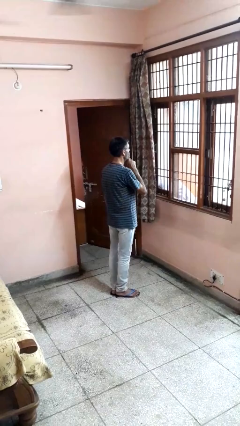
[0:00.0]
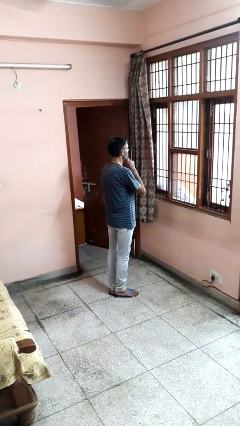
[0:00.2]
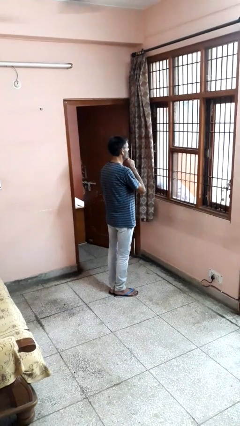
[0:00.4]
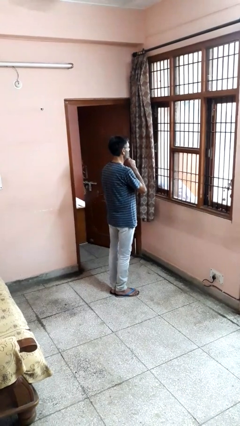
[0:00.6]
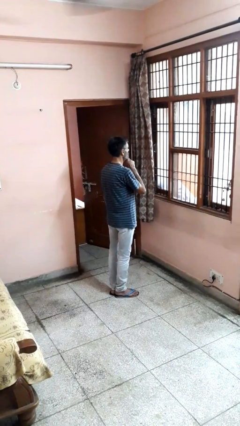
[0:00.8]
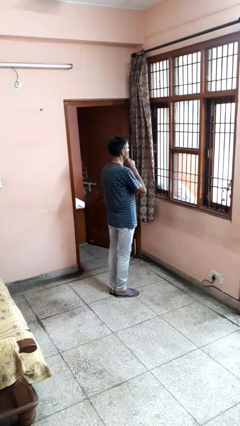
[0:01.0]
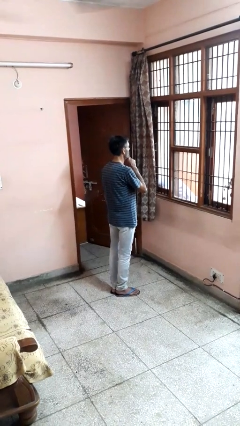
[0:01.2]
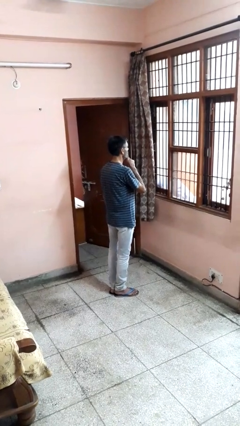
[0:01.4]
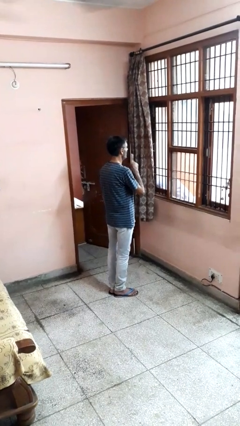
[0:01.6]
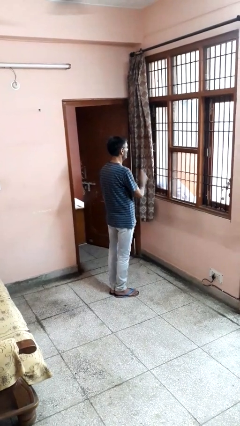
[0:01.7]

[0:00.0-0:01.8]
person gestures be quiet

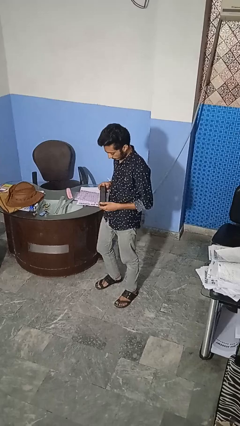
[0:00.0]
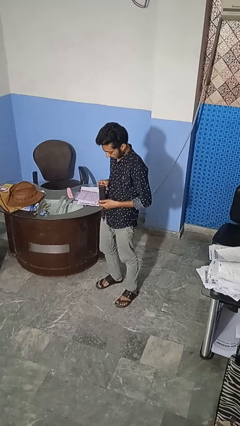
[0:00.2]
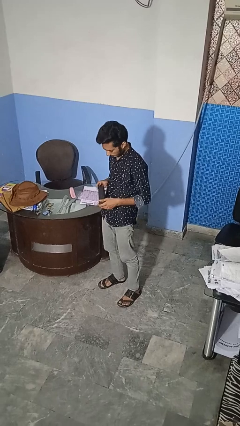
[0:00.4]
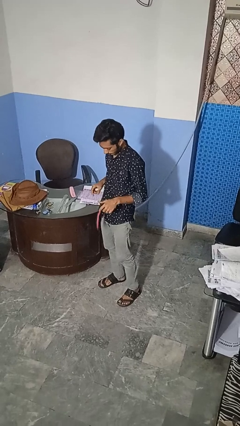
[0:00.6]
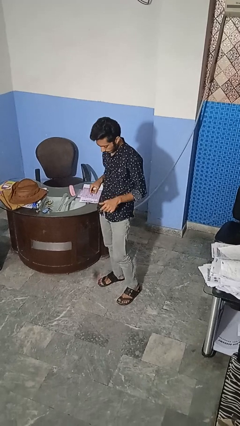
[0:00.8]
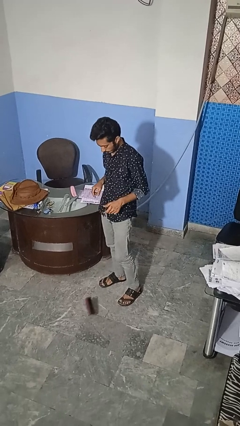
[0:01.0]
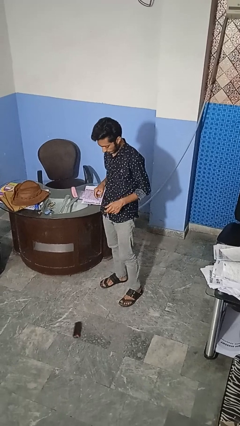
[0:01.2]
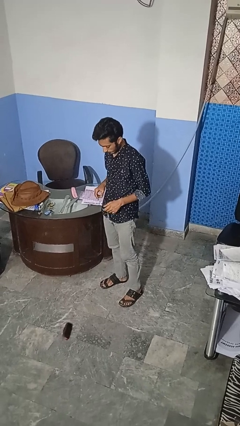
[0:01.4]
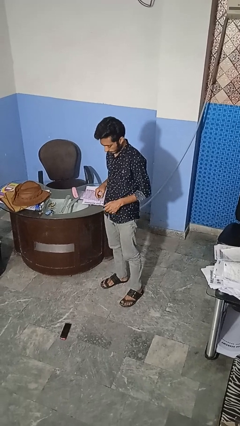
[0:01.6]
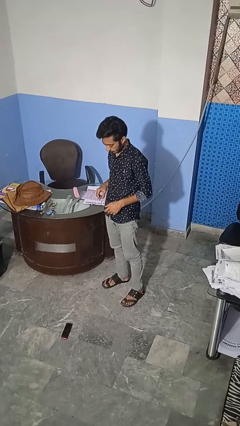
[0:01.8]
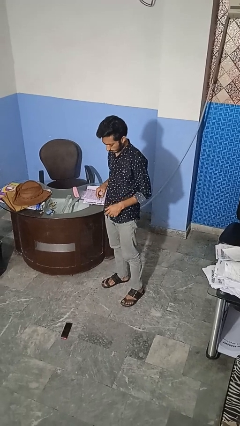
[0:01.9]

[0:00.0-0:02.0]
person drops object

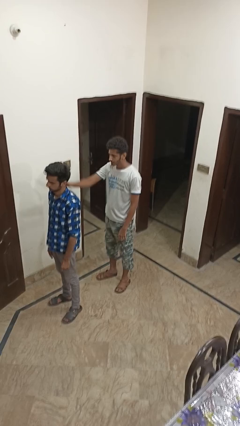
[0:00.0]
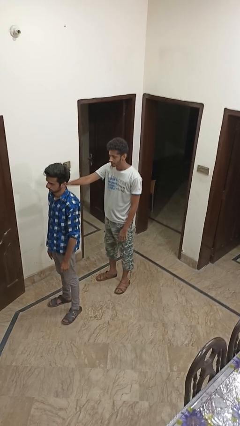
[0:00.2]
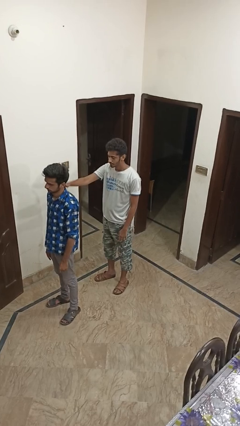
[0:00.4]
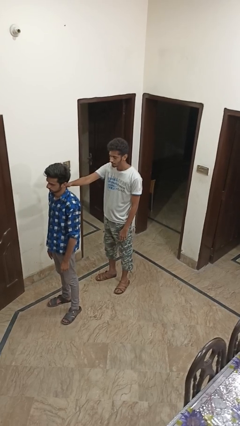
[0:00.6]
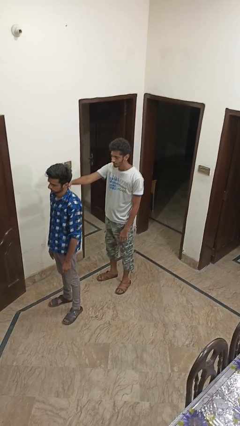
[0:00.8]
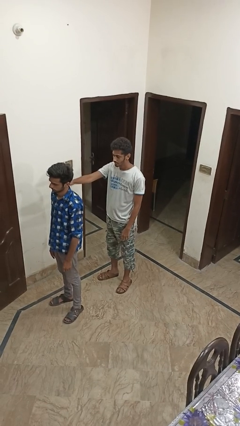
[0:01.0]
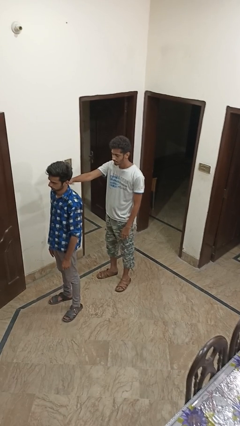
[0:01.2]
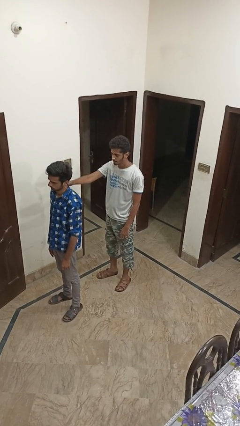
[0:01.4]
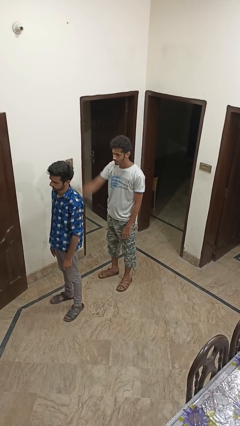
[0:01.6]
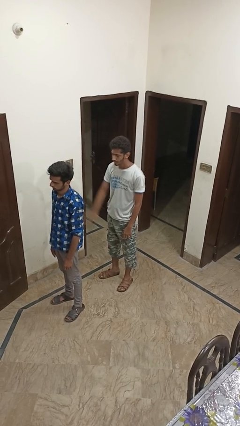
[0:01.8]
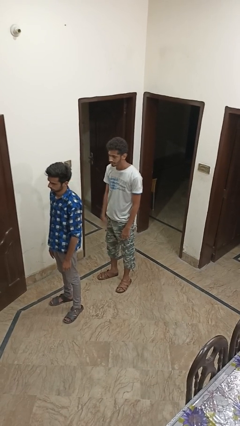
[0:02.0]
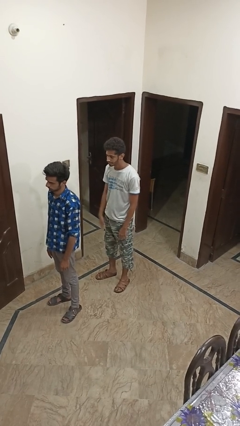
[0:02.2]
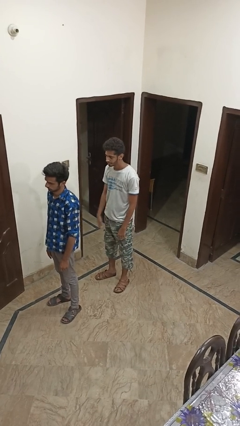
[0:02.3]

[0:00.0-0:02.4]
person touches back of person

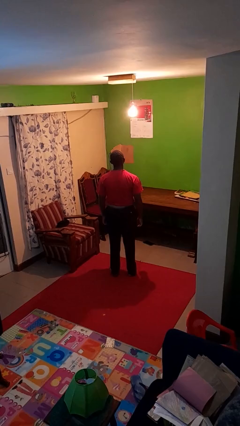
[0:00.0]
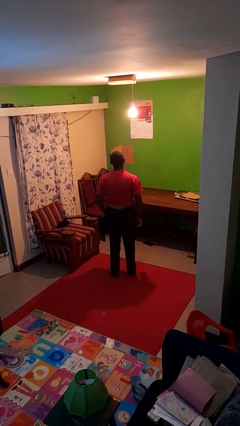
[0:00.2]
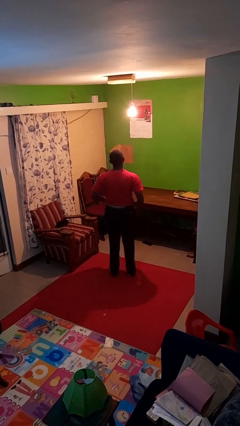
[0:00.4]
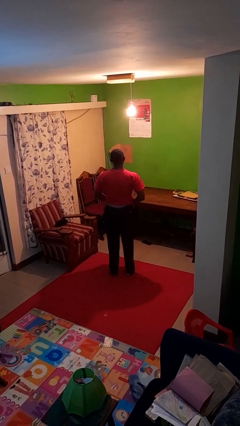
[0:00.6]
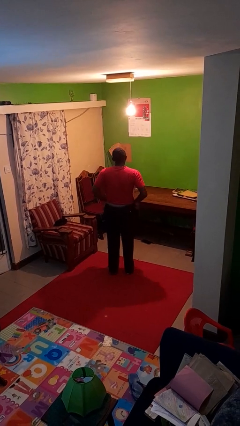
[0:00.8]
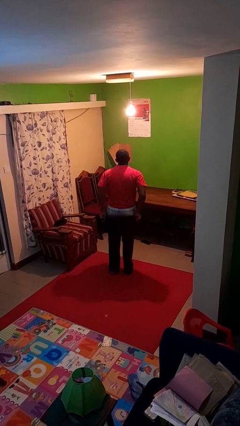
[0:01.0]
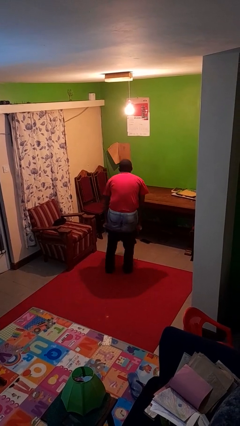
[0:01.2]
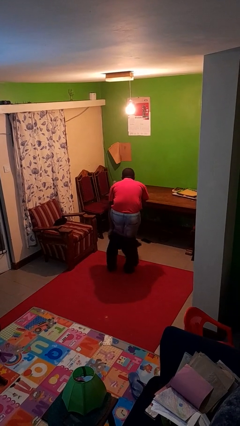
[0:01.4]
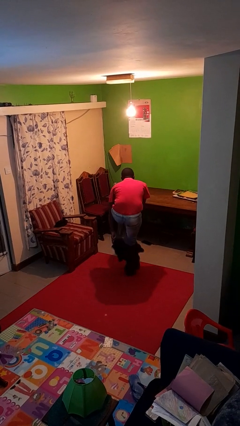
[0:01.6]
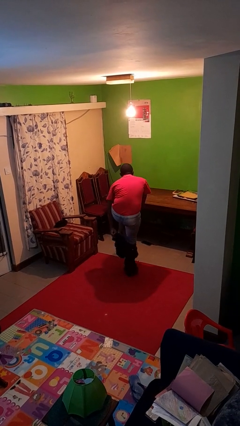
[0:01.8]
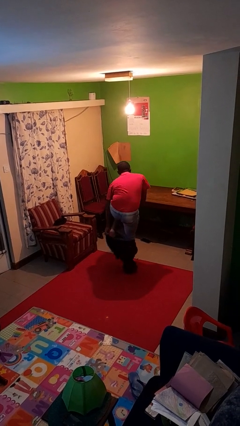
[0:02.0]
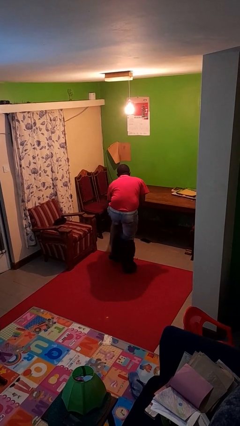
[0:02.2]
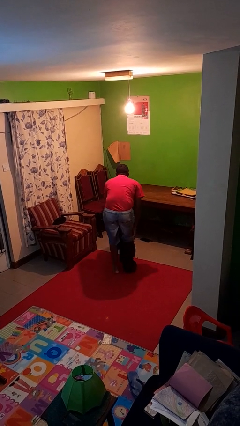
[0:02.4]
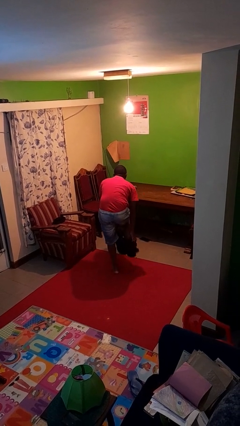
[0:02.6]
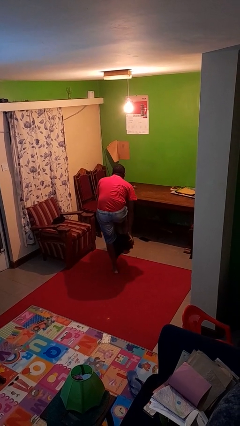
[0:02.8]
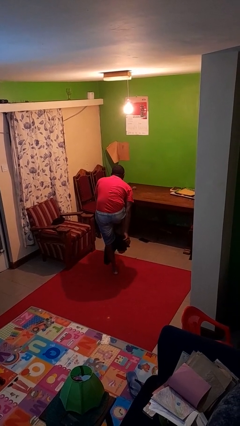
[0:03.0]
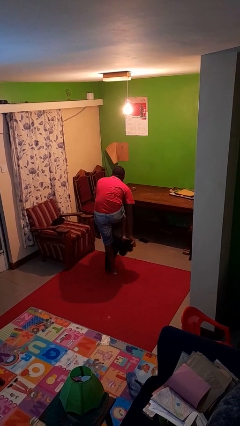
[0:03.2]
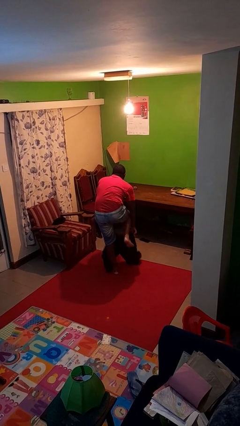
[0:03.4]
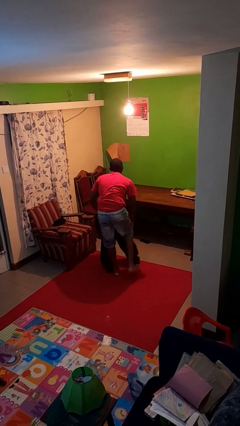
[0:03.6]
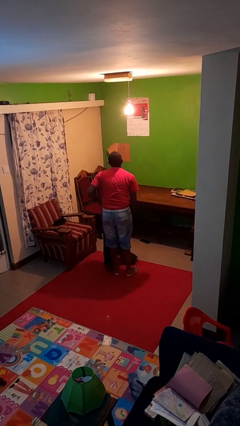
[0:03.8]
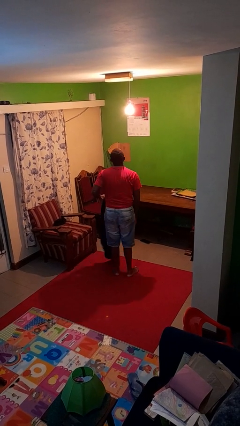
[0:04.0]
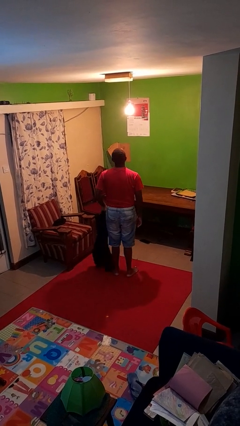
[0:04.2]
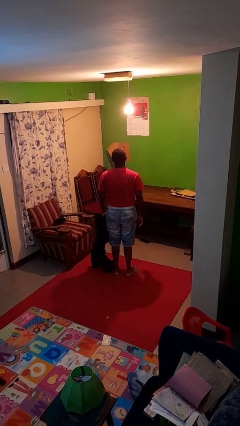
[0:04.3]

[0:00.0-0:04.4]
person takes off pants

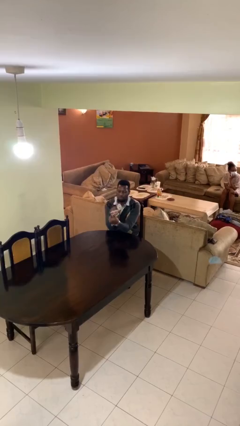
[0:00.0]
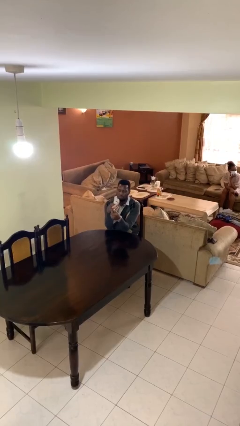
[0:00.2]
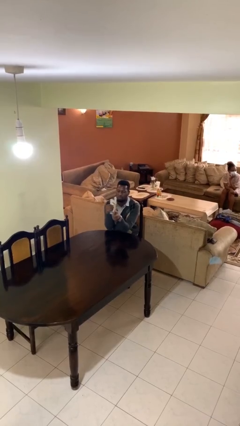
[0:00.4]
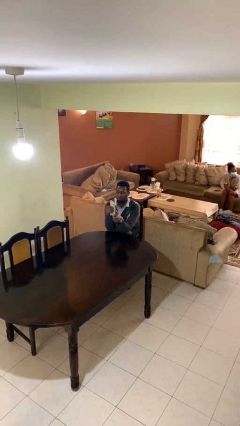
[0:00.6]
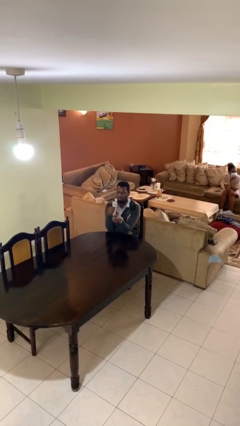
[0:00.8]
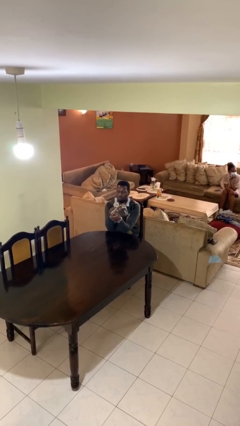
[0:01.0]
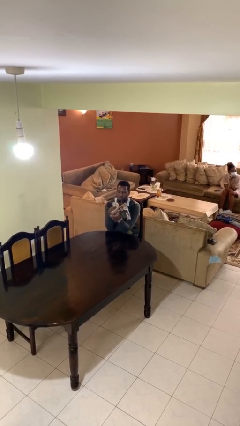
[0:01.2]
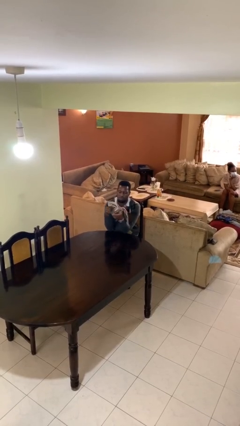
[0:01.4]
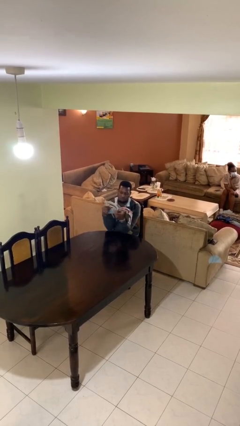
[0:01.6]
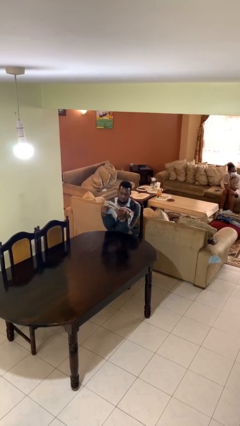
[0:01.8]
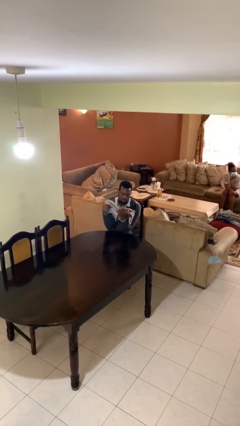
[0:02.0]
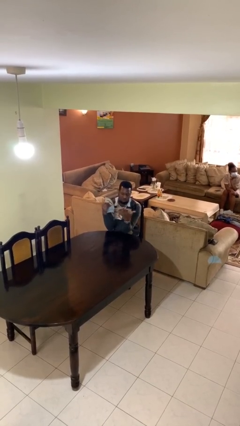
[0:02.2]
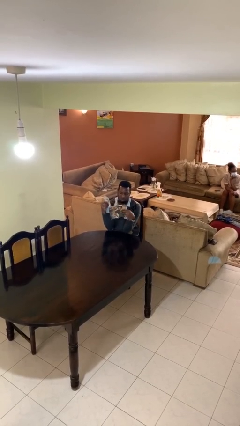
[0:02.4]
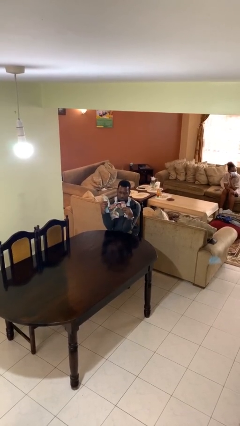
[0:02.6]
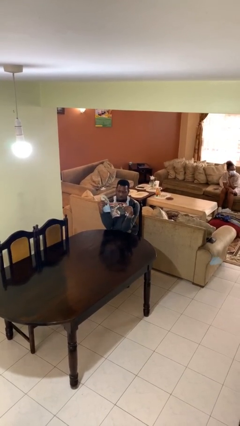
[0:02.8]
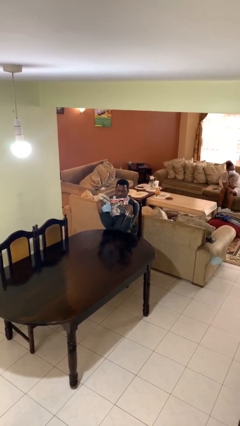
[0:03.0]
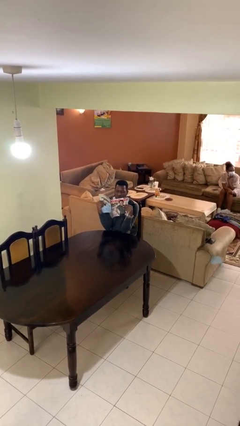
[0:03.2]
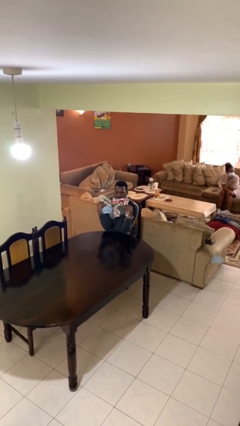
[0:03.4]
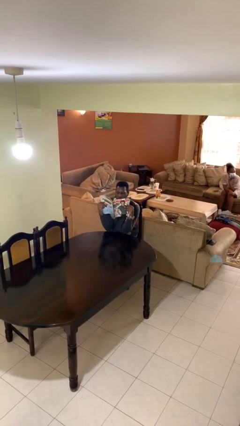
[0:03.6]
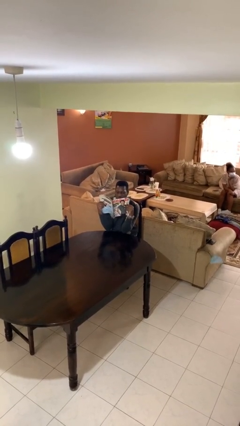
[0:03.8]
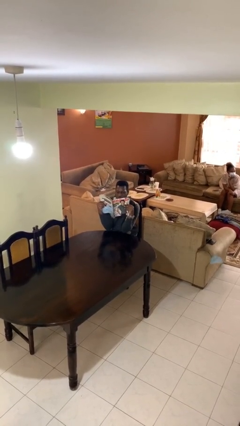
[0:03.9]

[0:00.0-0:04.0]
person reads document

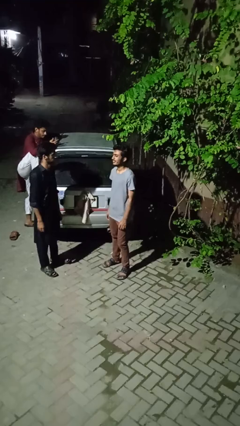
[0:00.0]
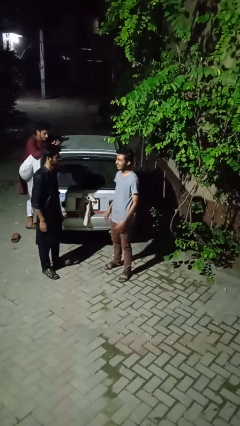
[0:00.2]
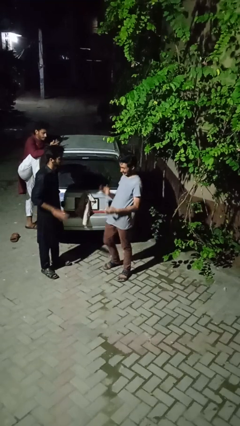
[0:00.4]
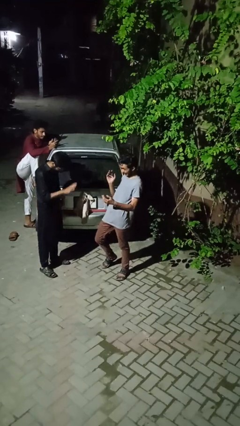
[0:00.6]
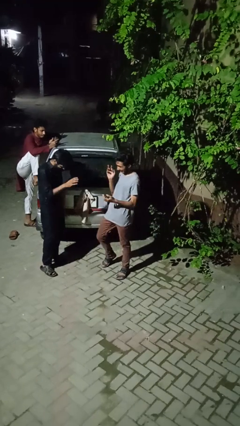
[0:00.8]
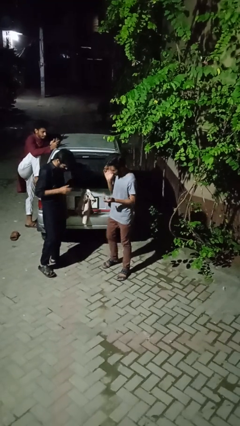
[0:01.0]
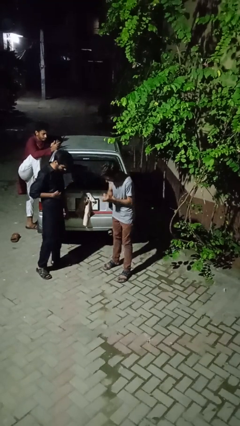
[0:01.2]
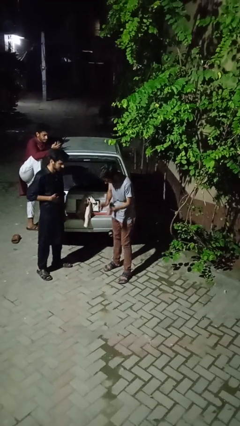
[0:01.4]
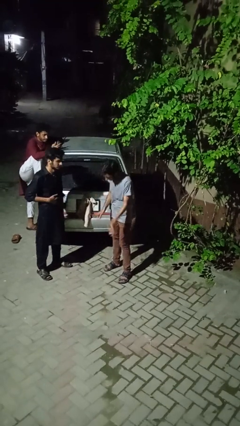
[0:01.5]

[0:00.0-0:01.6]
person laughs with person

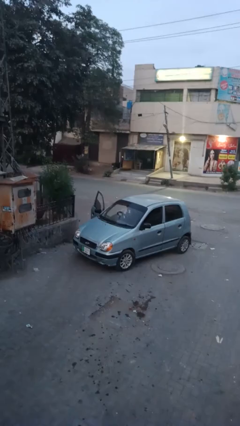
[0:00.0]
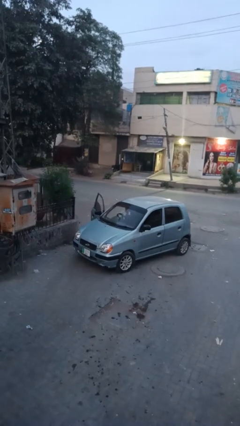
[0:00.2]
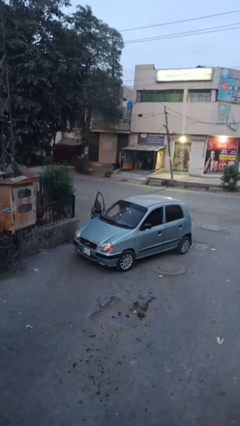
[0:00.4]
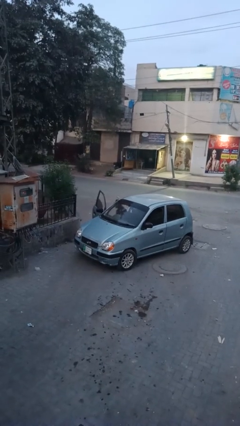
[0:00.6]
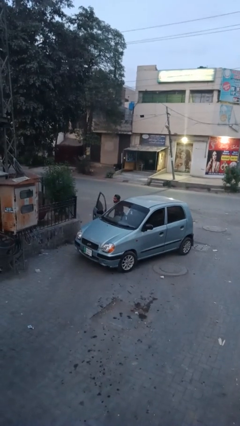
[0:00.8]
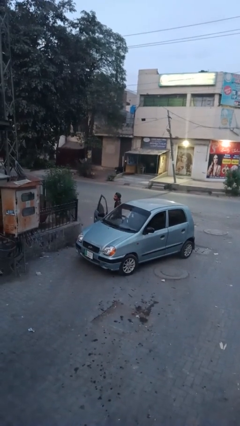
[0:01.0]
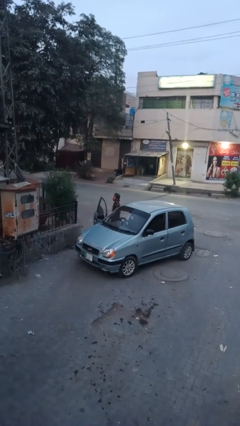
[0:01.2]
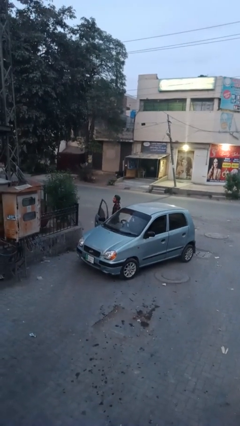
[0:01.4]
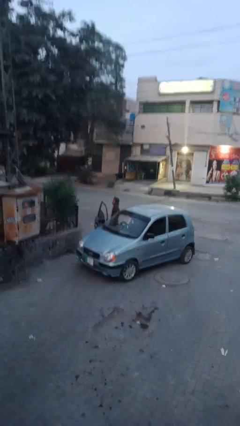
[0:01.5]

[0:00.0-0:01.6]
person exits car
